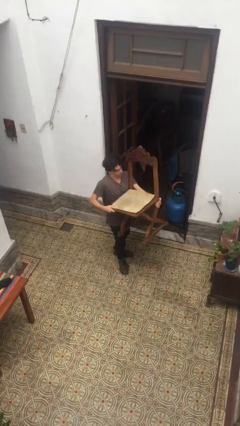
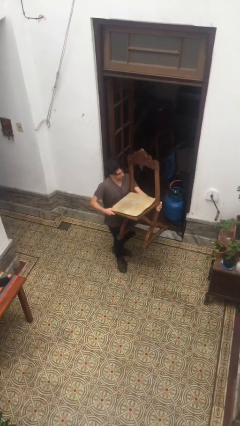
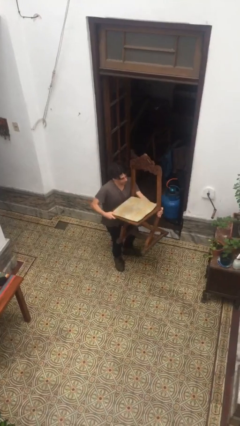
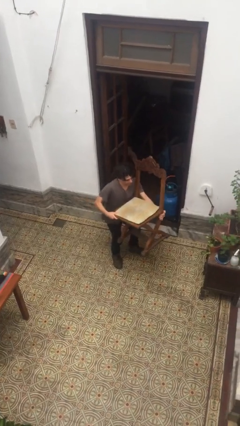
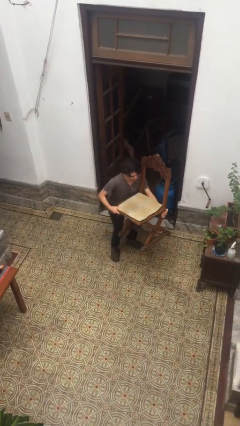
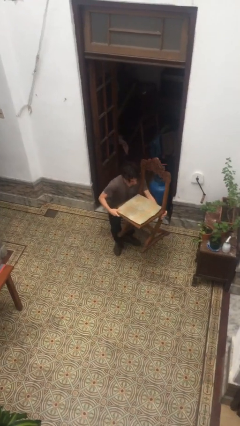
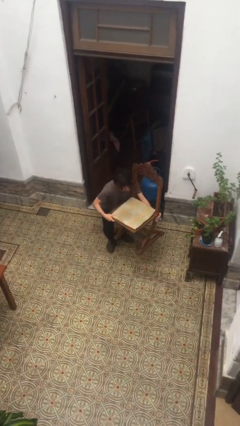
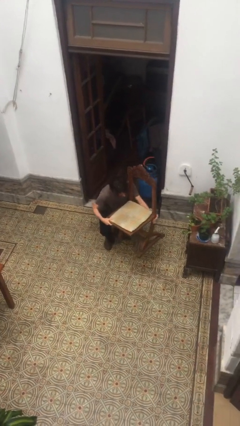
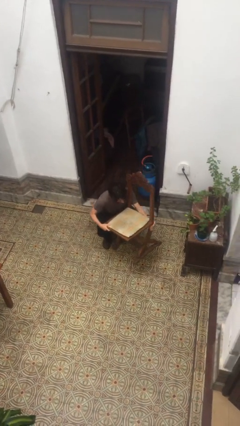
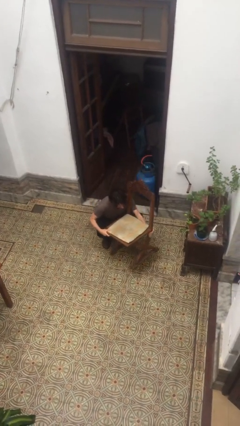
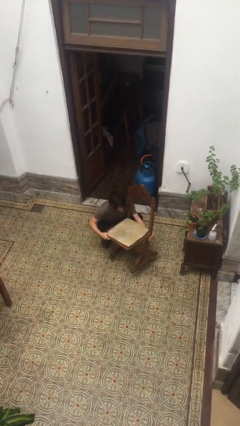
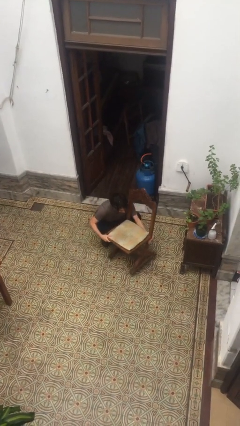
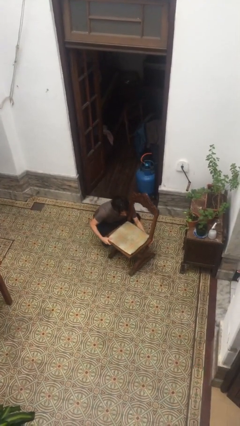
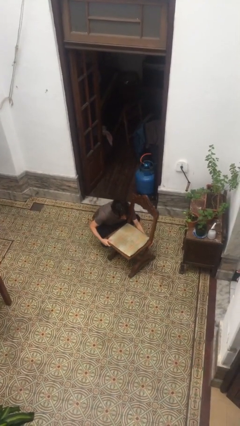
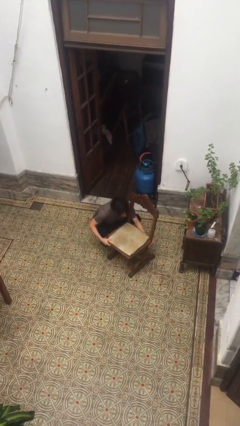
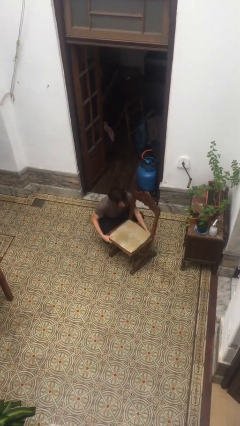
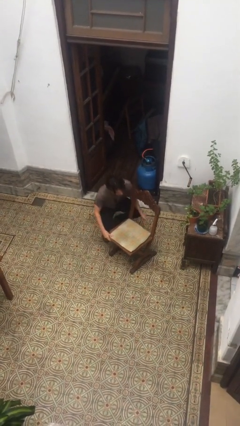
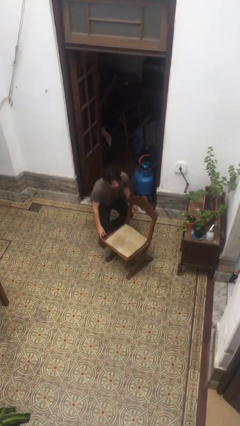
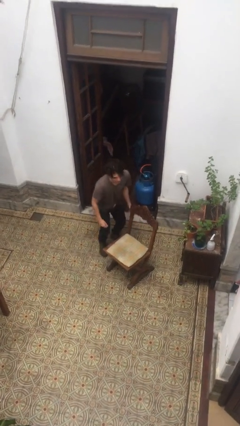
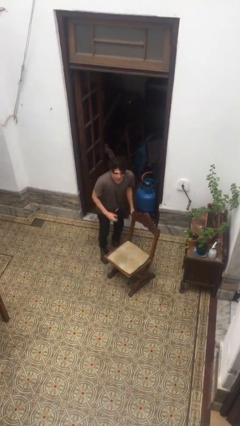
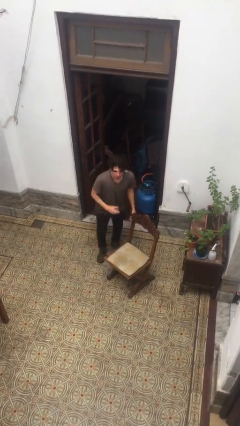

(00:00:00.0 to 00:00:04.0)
person puts down object on floor

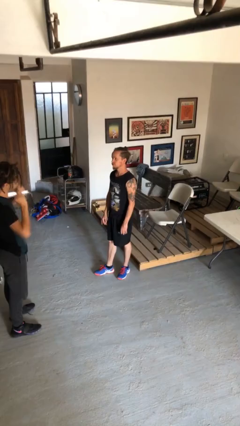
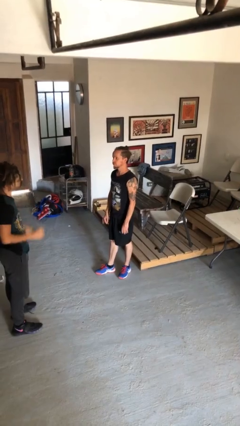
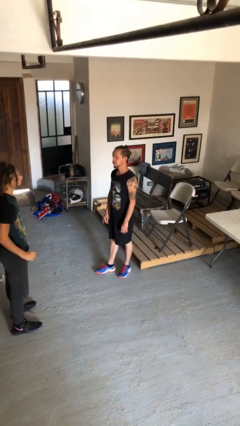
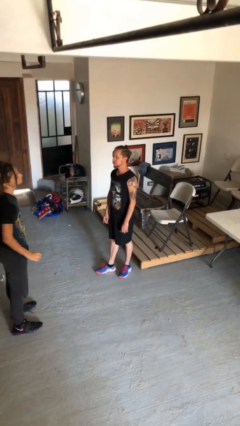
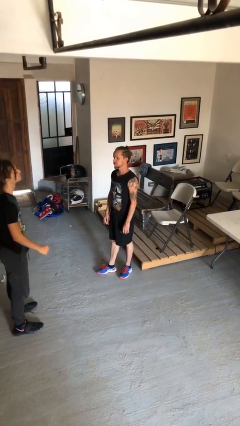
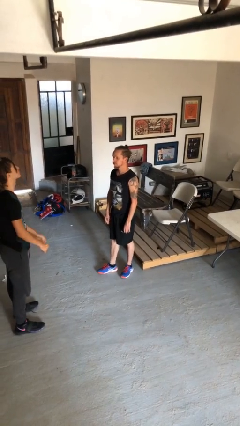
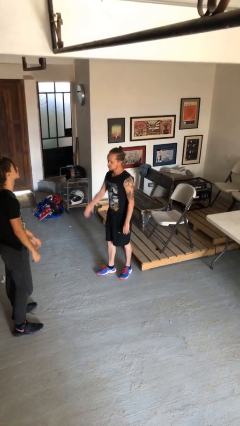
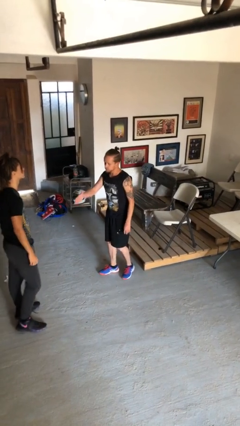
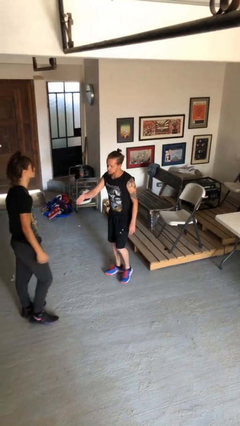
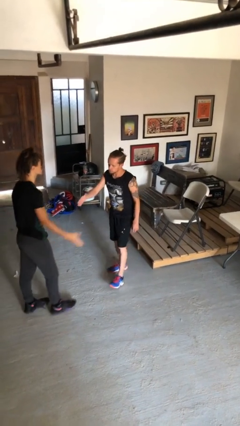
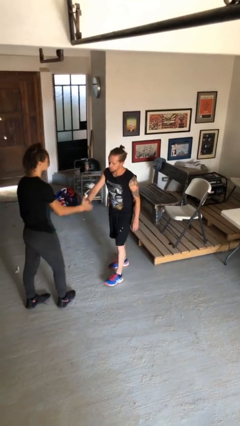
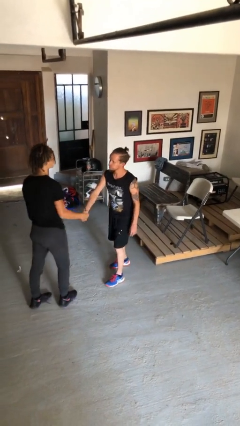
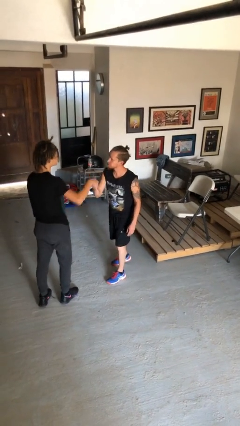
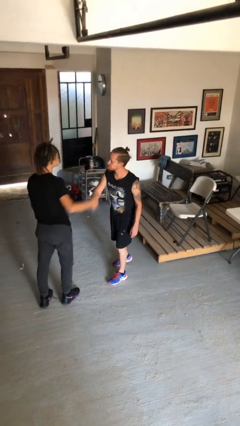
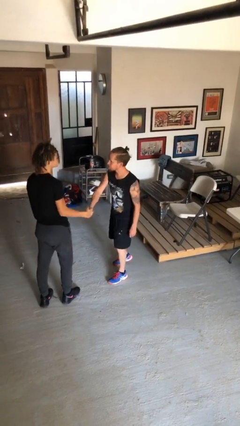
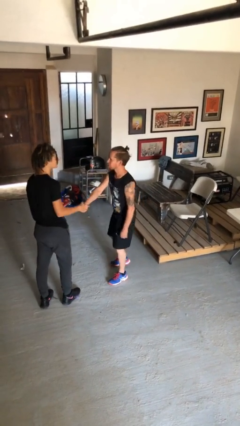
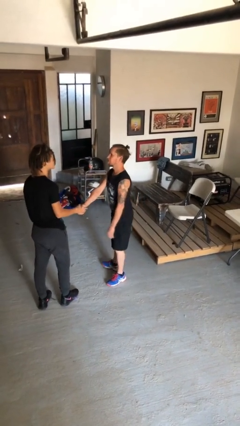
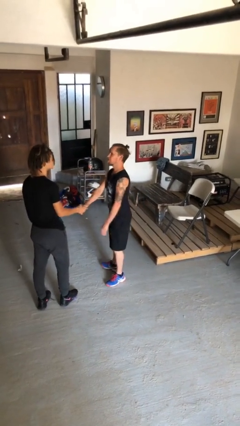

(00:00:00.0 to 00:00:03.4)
person shakes hand

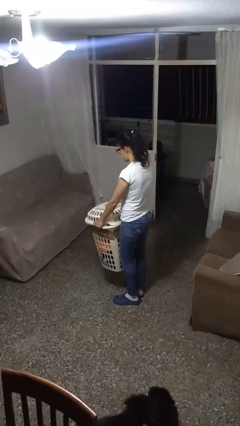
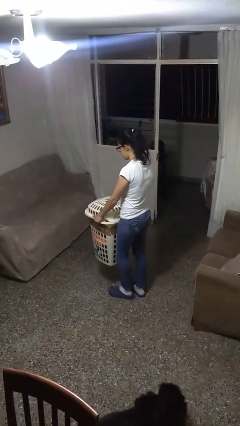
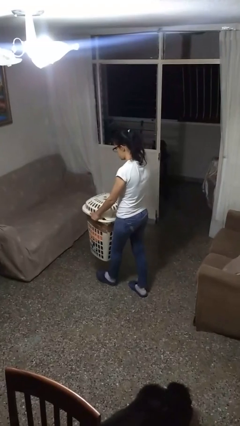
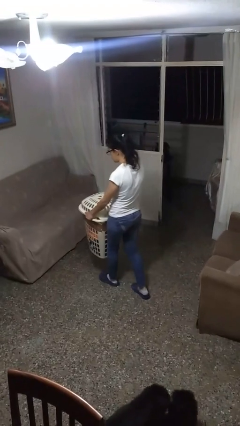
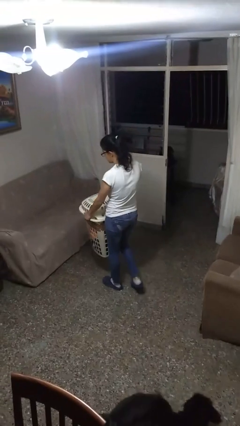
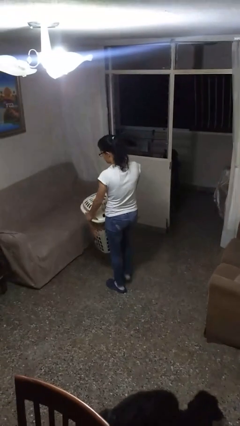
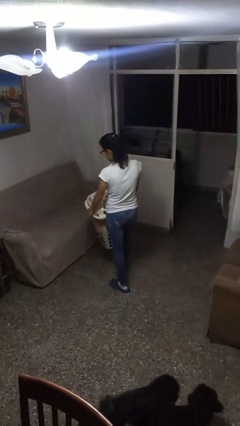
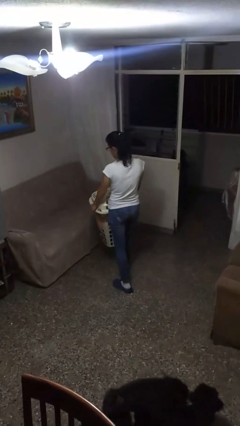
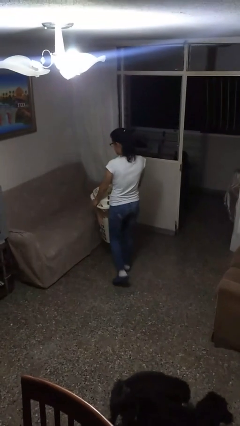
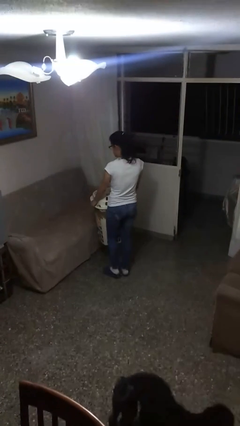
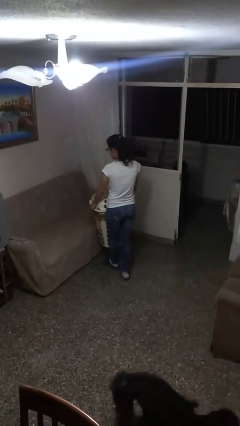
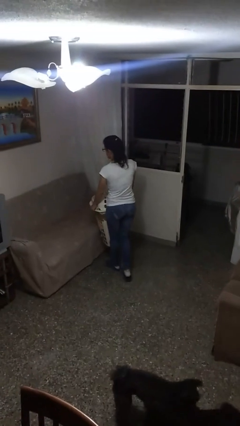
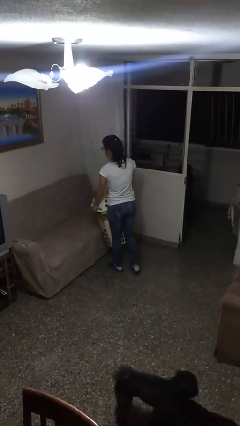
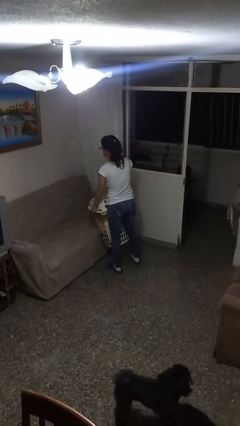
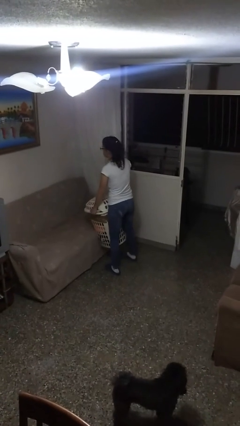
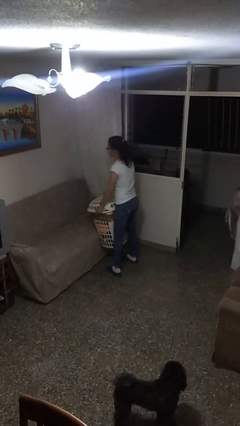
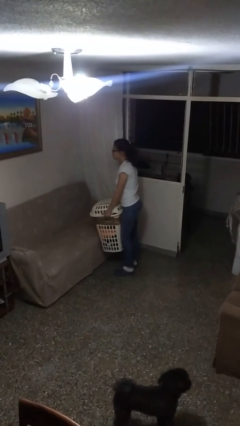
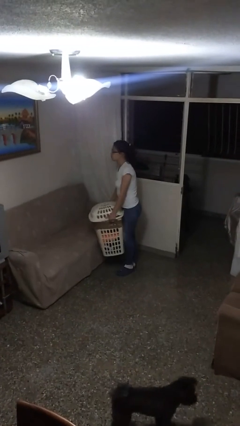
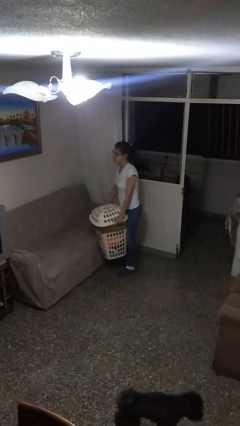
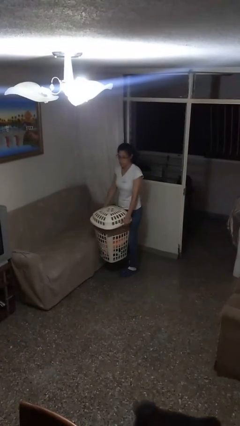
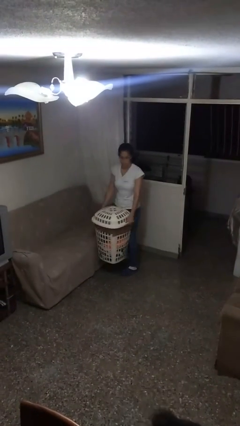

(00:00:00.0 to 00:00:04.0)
person carries laundry basket

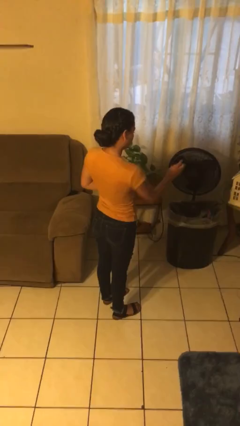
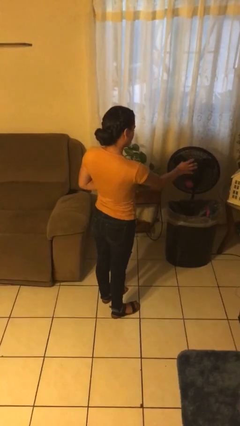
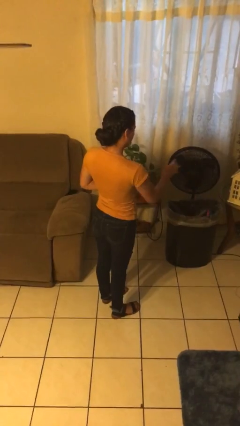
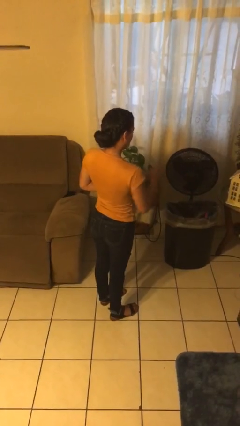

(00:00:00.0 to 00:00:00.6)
person discards trash

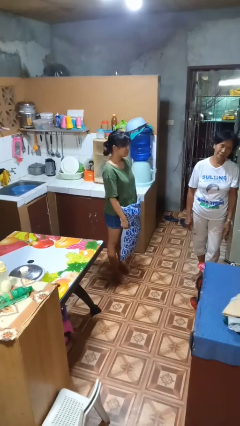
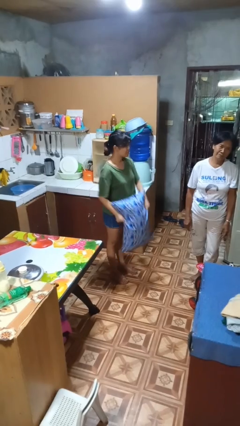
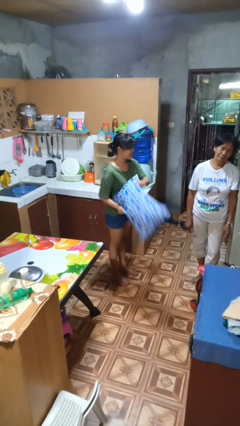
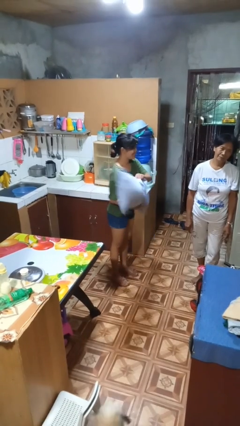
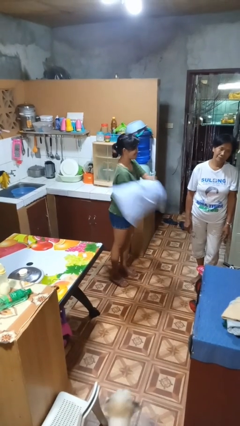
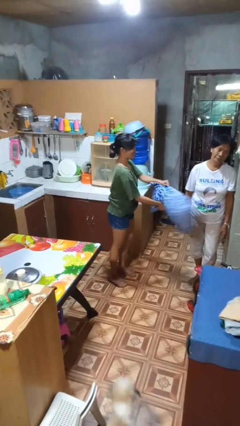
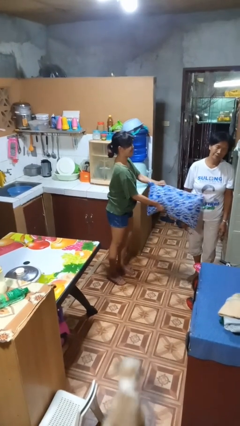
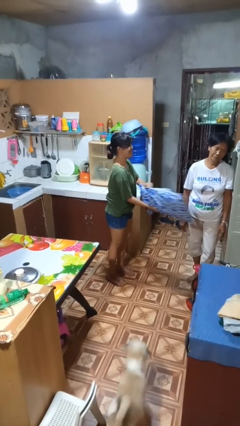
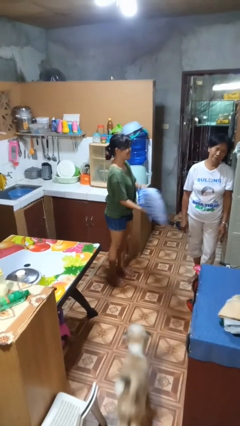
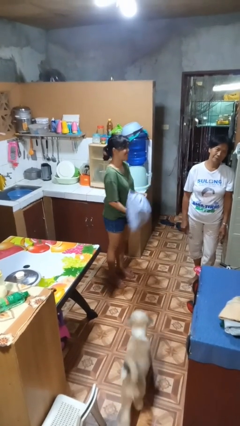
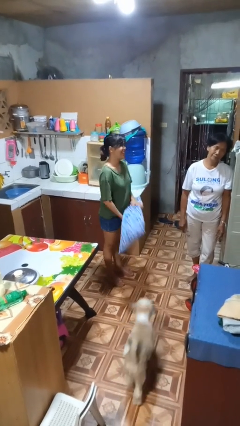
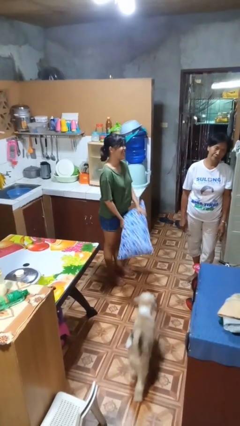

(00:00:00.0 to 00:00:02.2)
person hits person with pillow

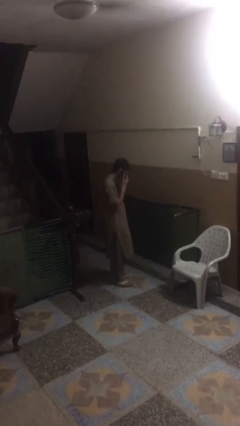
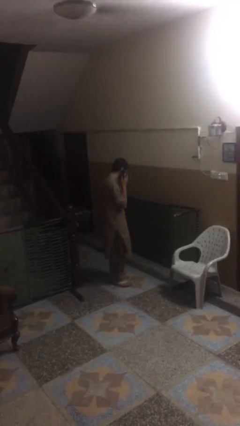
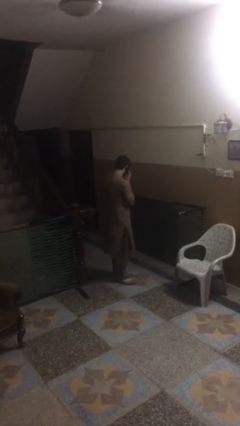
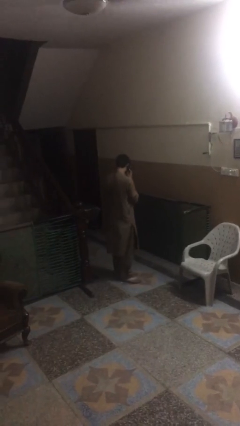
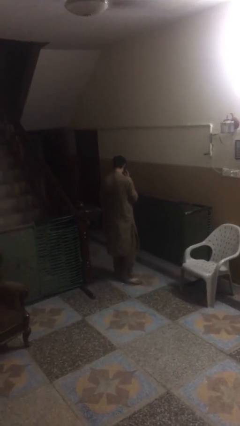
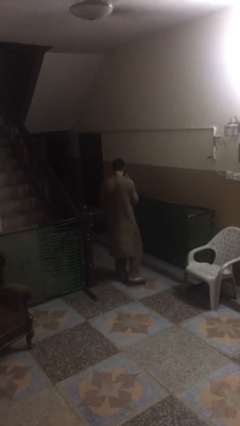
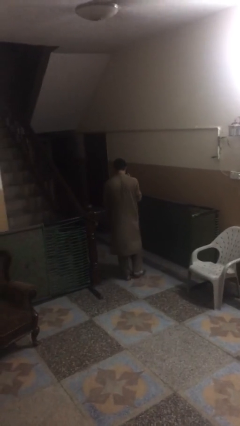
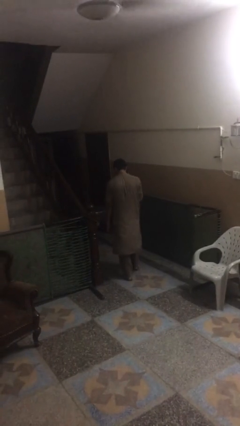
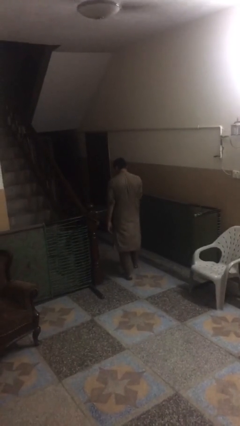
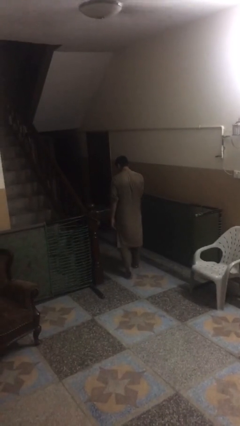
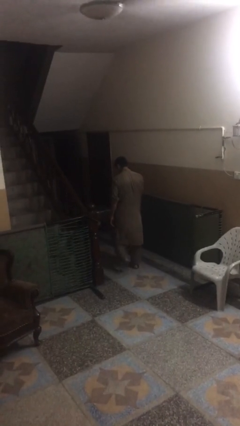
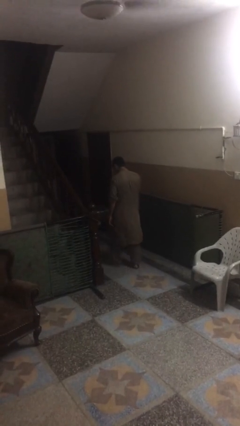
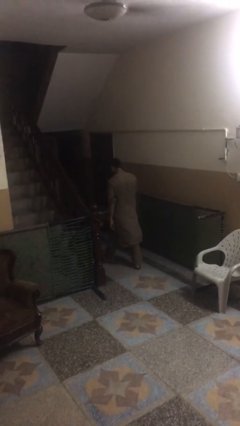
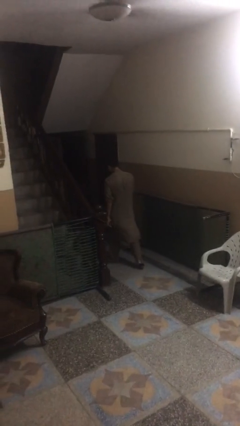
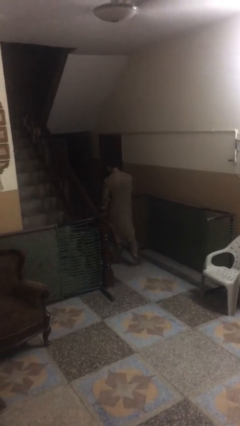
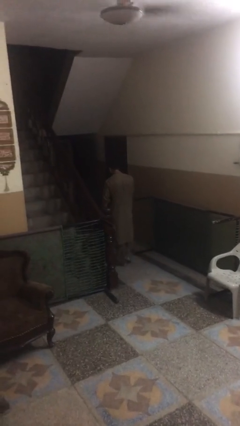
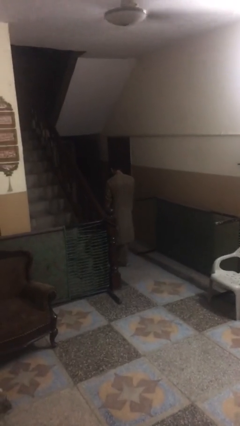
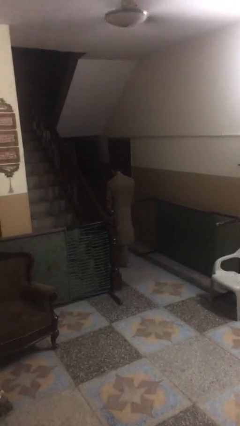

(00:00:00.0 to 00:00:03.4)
person talks on phone
